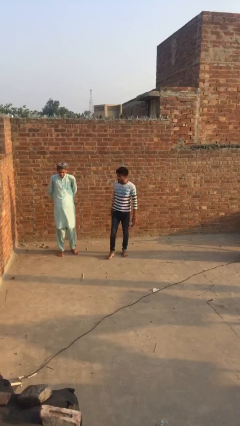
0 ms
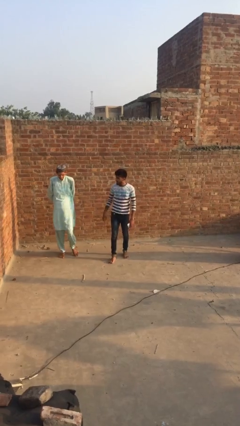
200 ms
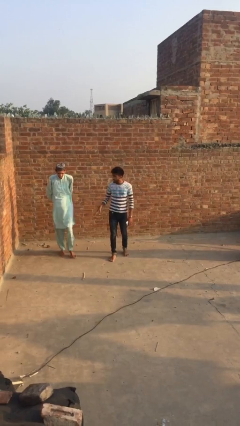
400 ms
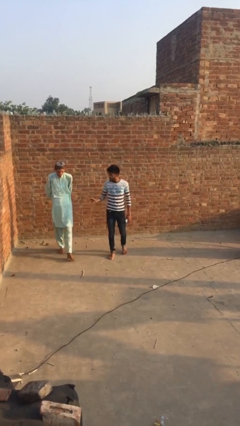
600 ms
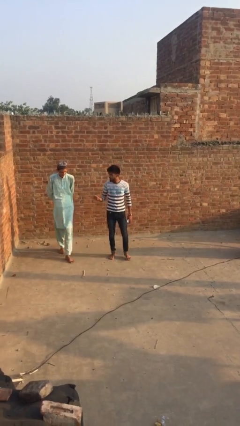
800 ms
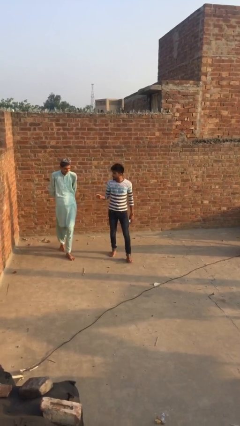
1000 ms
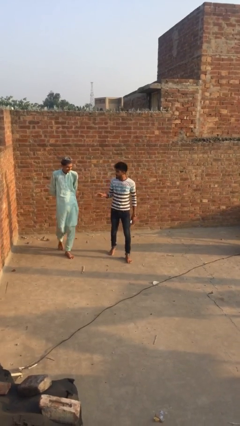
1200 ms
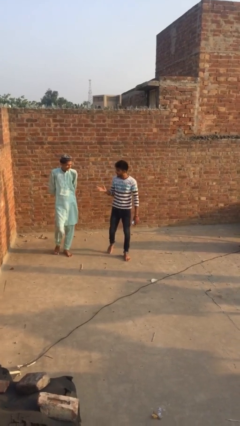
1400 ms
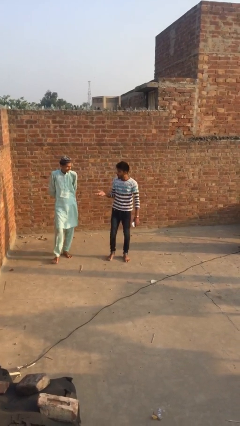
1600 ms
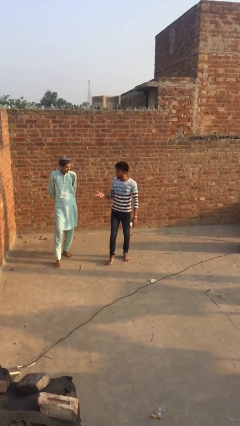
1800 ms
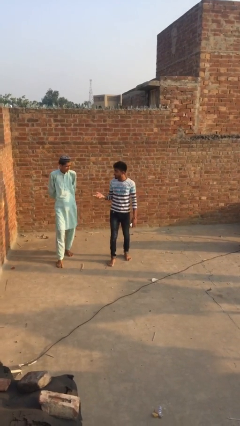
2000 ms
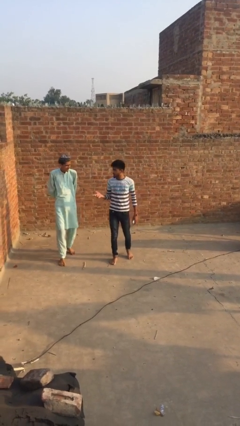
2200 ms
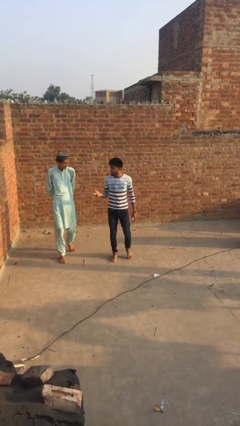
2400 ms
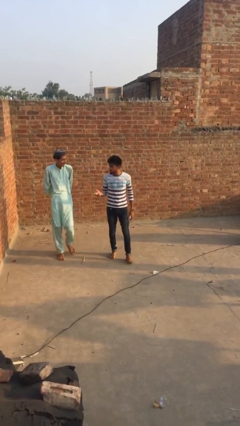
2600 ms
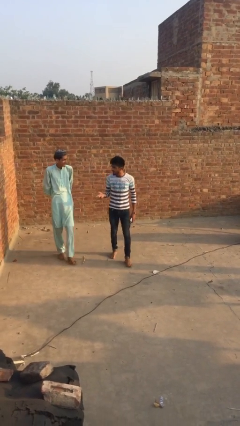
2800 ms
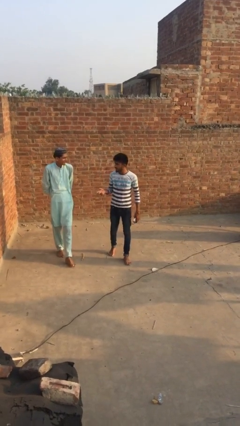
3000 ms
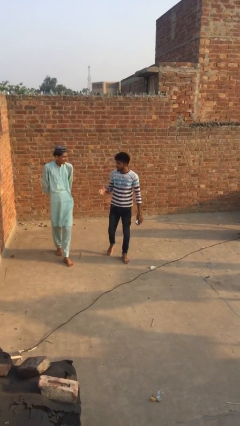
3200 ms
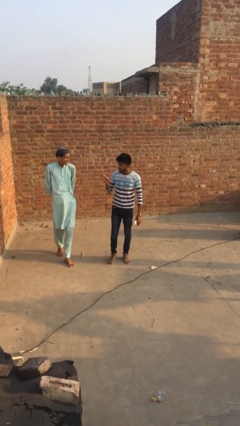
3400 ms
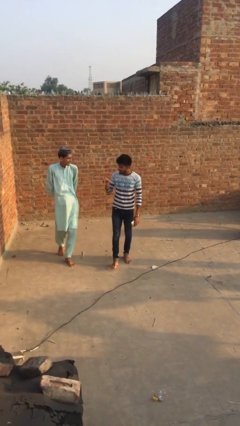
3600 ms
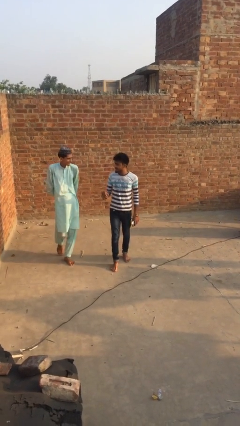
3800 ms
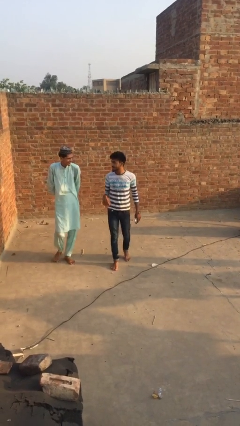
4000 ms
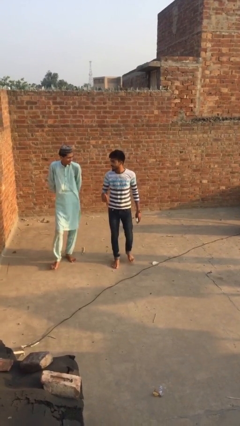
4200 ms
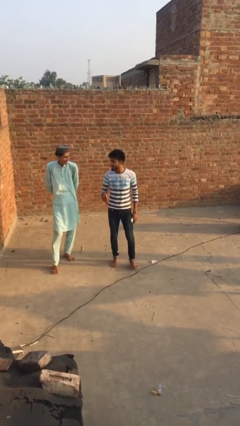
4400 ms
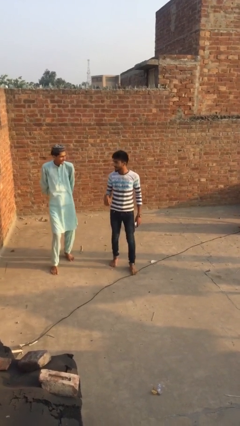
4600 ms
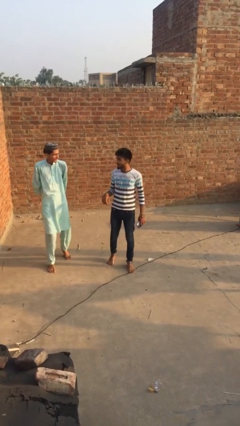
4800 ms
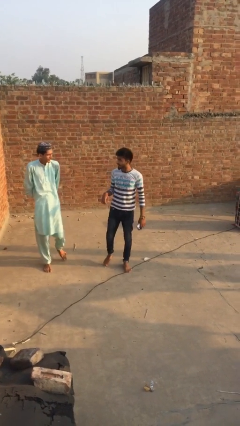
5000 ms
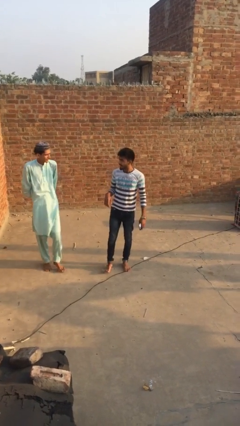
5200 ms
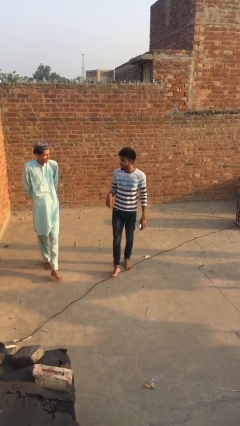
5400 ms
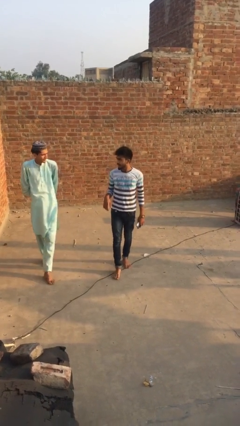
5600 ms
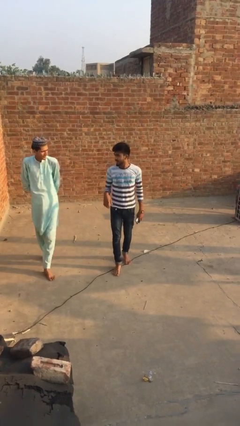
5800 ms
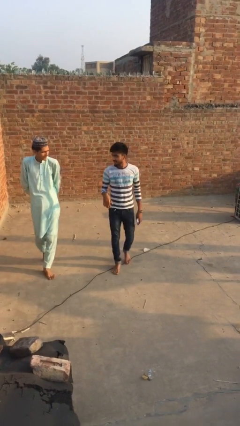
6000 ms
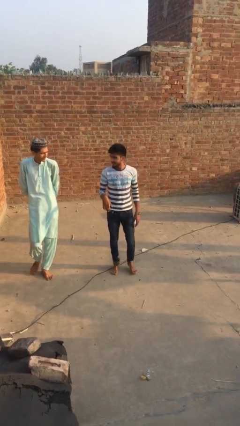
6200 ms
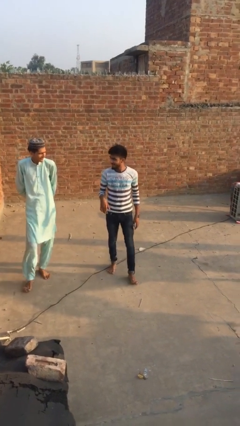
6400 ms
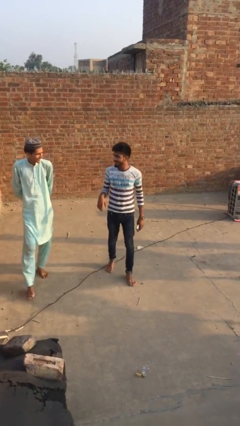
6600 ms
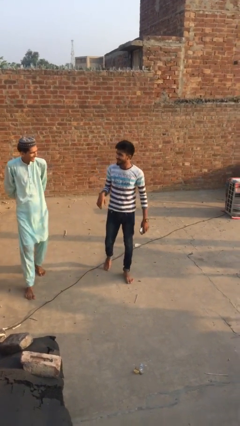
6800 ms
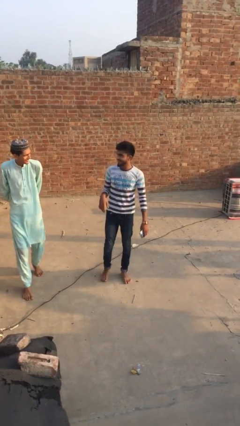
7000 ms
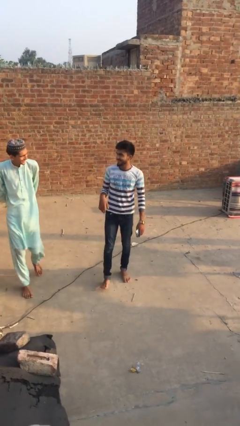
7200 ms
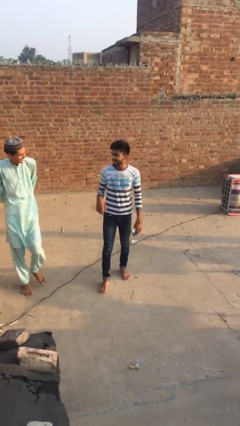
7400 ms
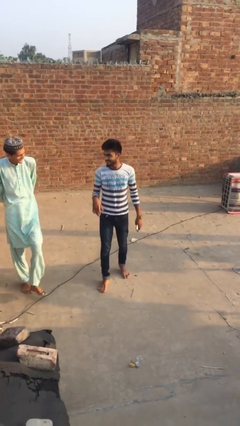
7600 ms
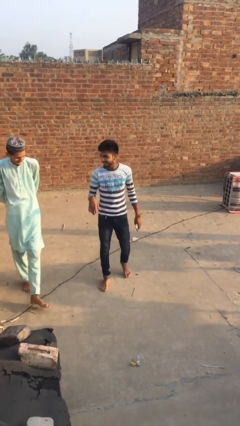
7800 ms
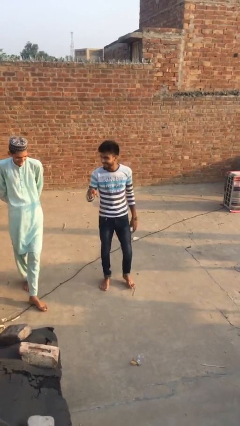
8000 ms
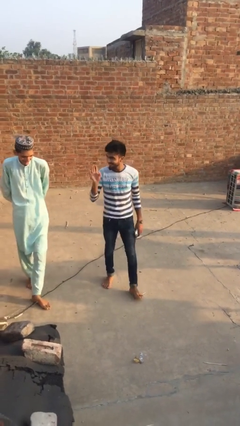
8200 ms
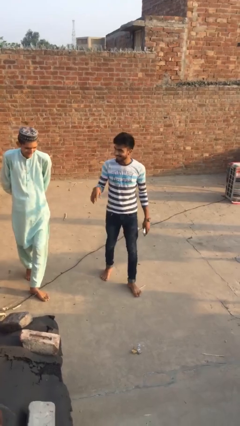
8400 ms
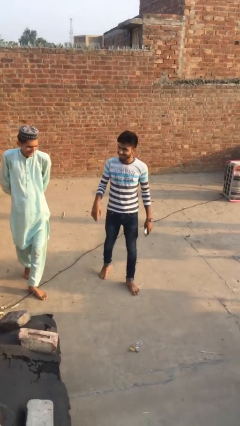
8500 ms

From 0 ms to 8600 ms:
person talks to person

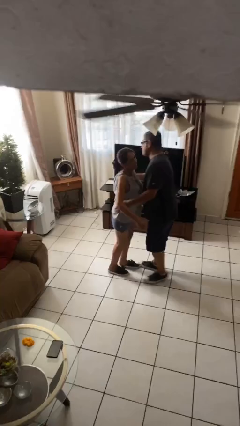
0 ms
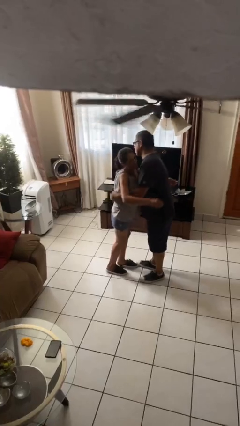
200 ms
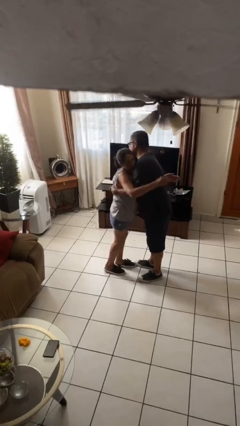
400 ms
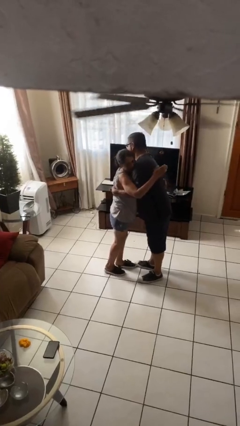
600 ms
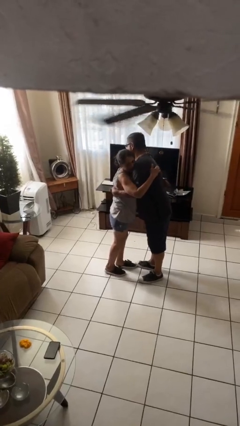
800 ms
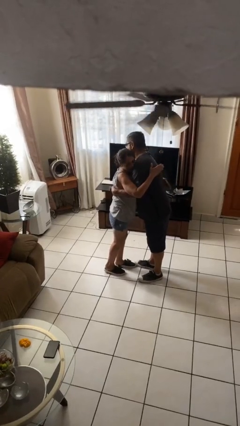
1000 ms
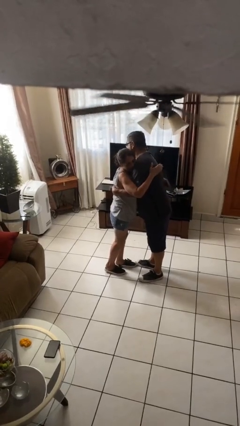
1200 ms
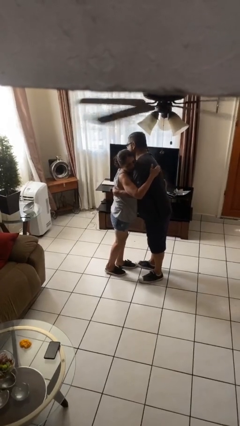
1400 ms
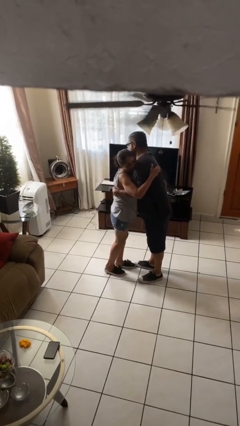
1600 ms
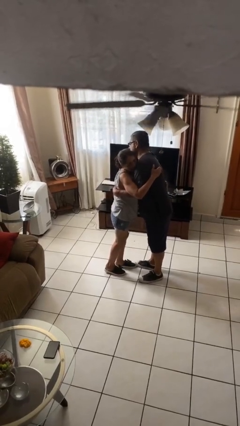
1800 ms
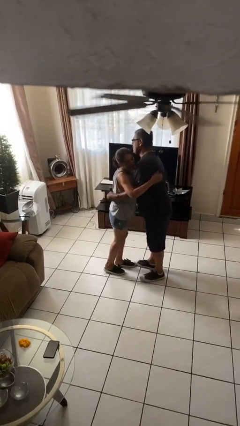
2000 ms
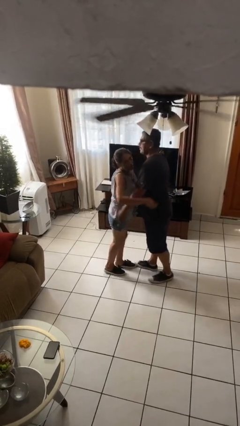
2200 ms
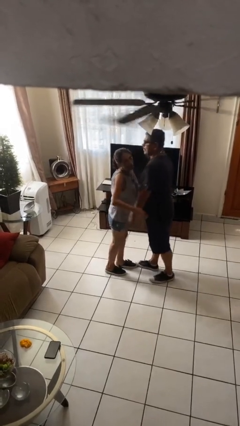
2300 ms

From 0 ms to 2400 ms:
person embraces person

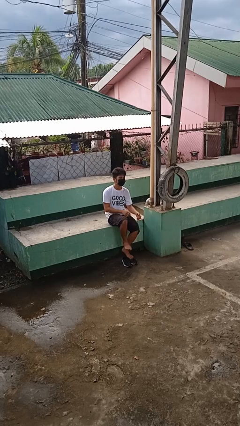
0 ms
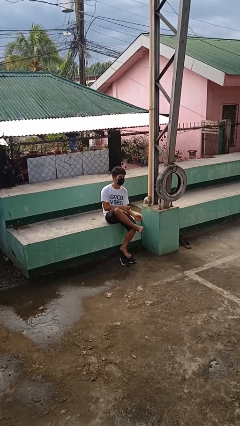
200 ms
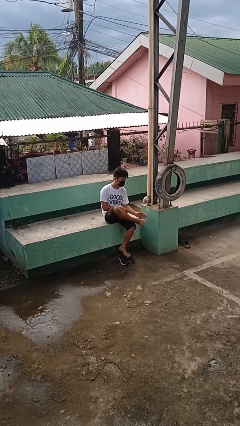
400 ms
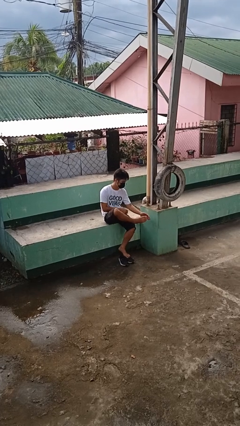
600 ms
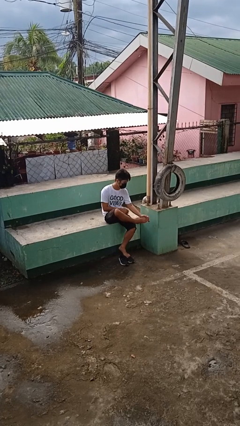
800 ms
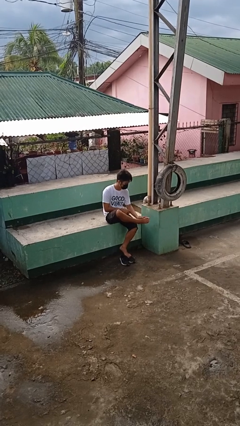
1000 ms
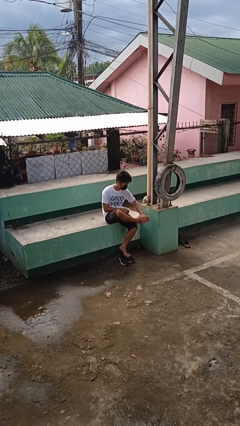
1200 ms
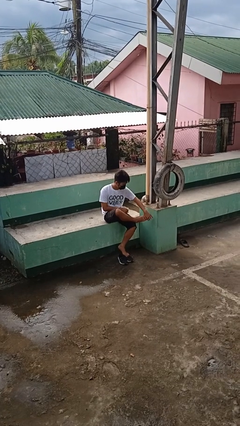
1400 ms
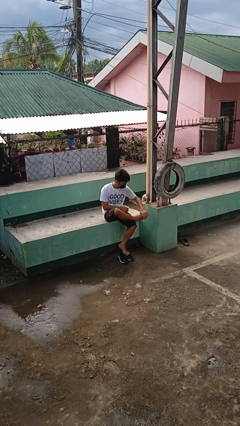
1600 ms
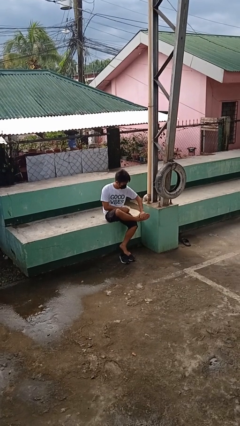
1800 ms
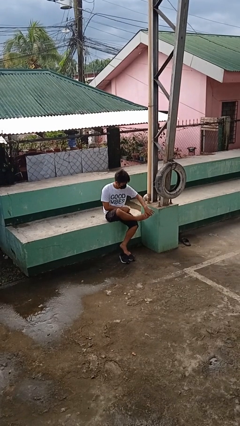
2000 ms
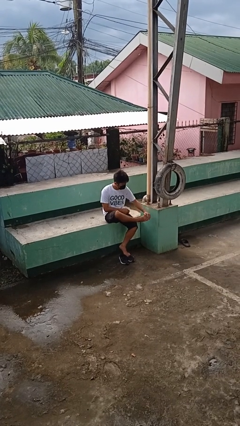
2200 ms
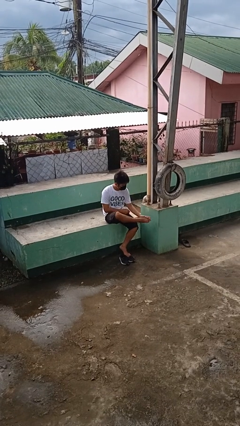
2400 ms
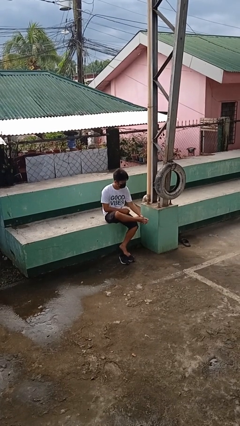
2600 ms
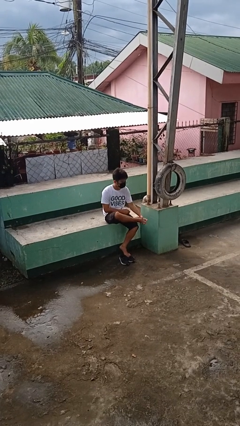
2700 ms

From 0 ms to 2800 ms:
person rubs foot

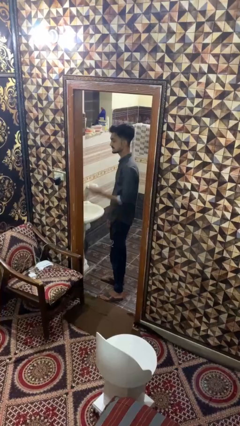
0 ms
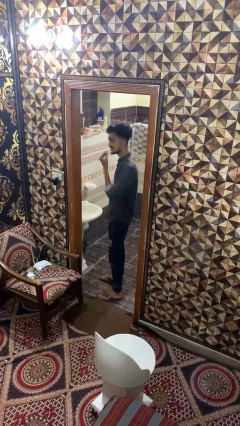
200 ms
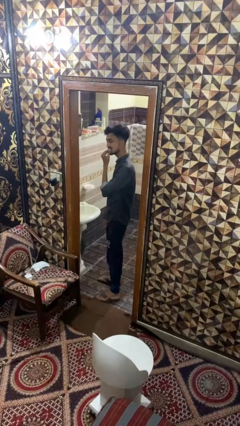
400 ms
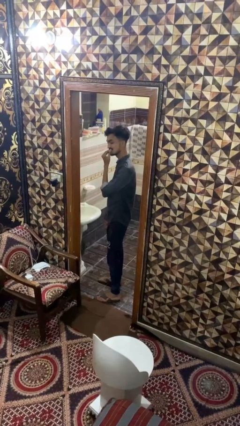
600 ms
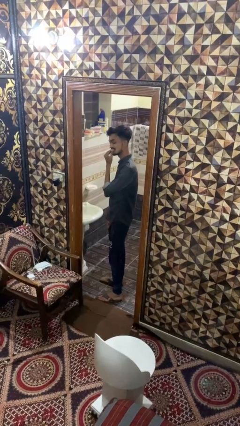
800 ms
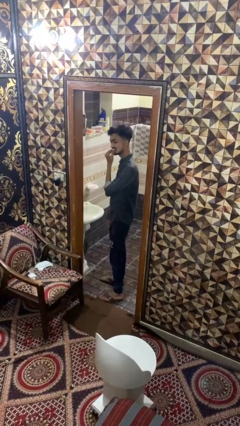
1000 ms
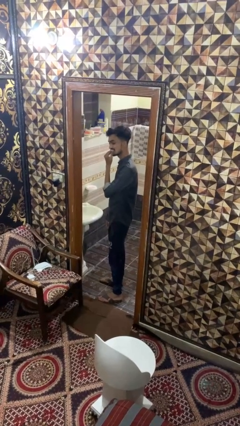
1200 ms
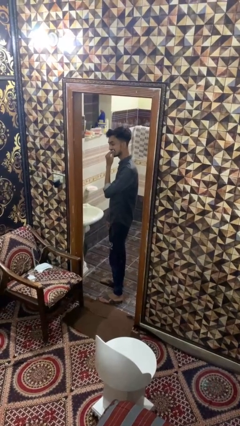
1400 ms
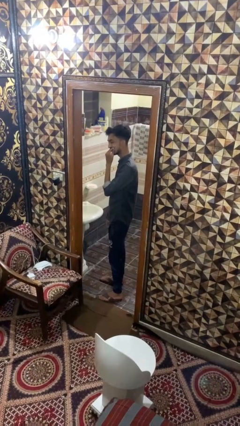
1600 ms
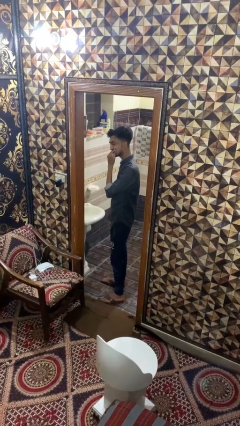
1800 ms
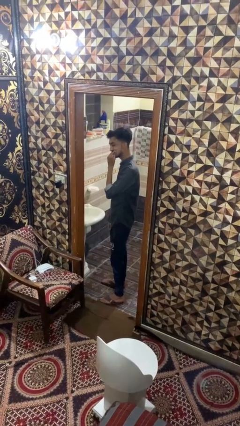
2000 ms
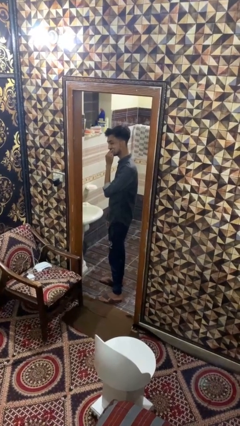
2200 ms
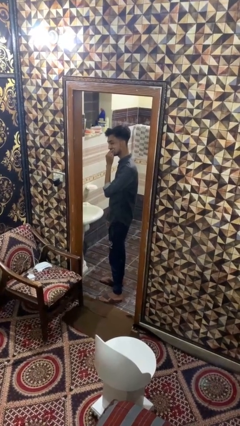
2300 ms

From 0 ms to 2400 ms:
person flosses

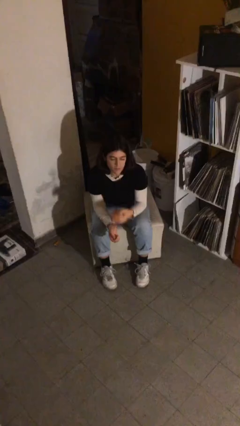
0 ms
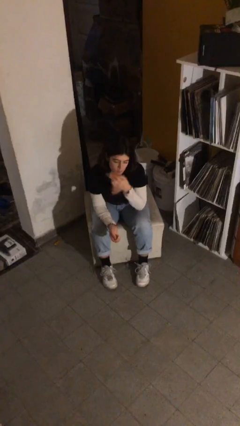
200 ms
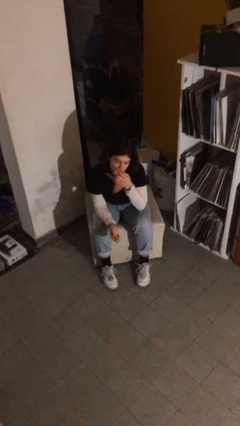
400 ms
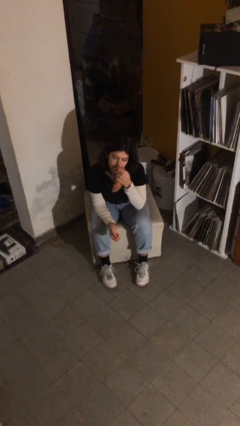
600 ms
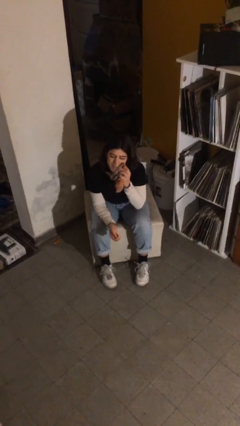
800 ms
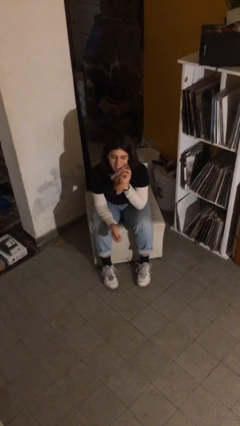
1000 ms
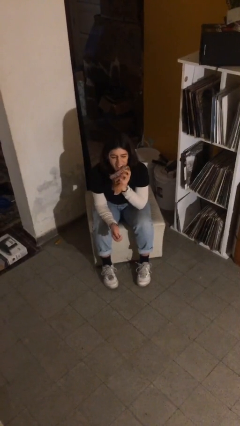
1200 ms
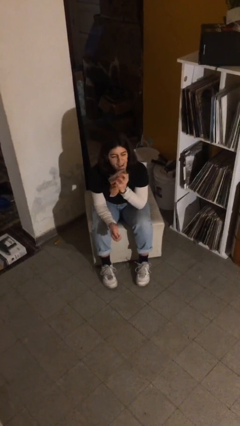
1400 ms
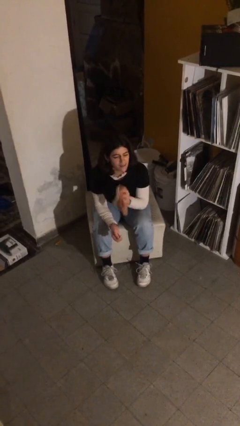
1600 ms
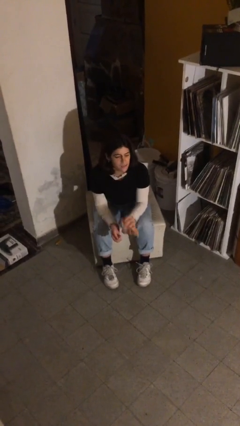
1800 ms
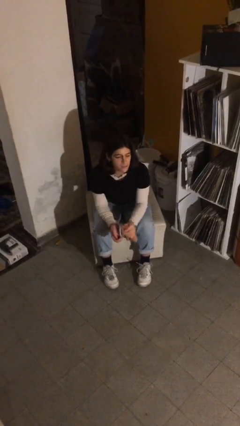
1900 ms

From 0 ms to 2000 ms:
person wipes mouth with napkin
